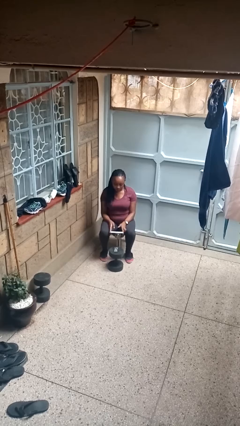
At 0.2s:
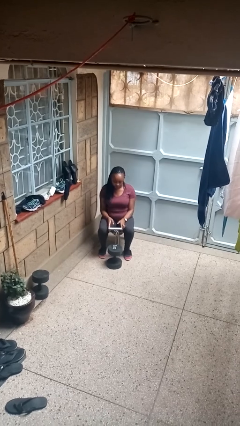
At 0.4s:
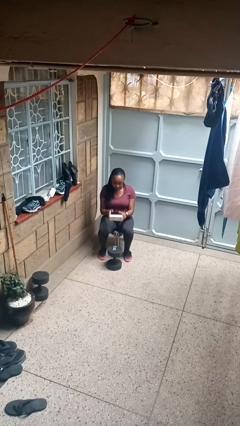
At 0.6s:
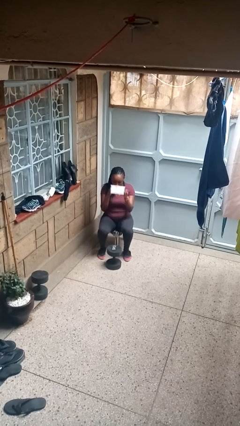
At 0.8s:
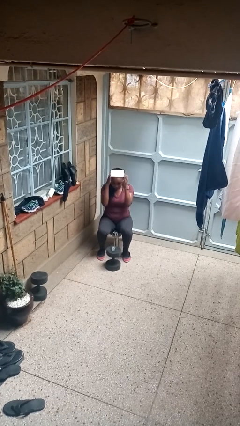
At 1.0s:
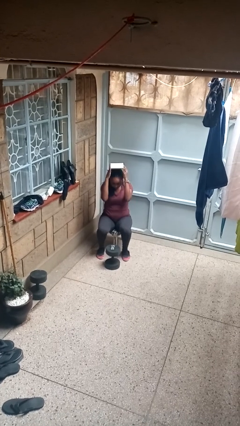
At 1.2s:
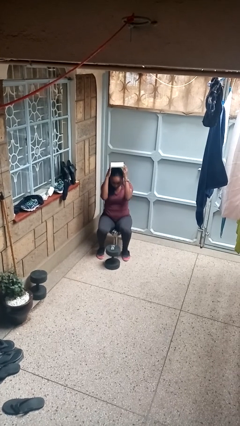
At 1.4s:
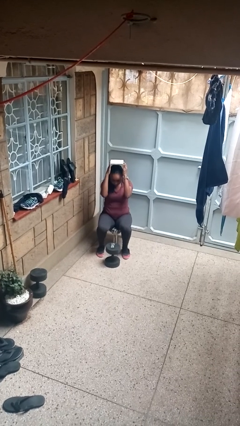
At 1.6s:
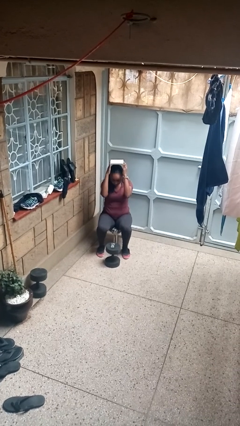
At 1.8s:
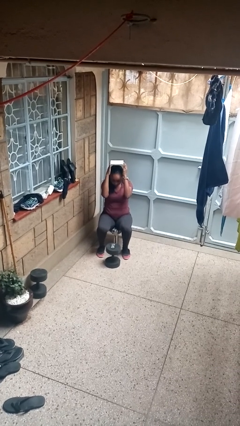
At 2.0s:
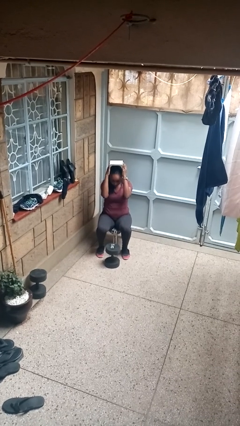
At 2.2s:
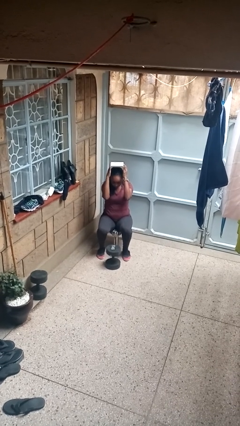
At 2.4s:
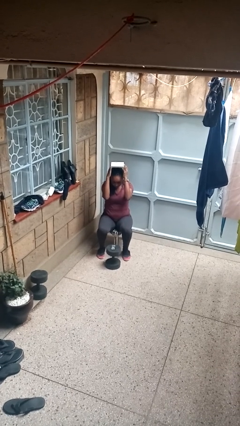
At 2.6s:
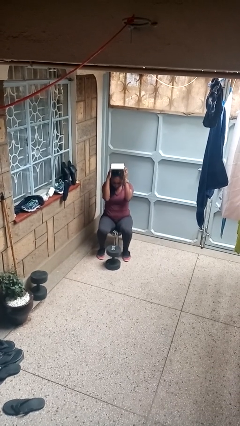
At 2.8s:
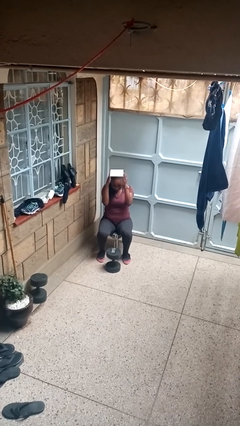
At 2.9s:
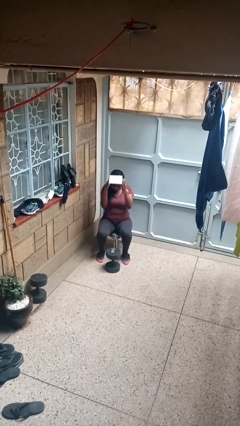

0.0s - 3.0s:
person holds object above head

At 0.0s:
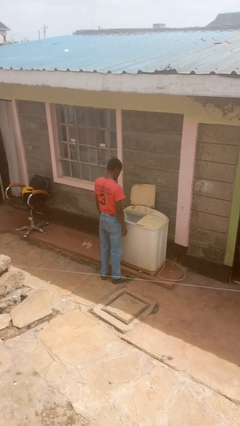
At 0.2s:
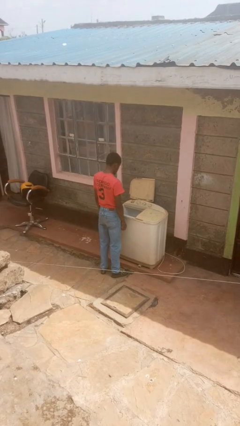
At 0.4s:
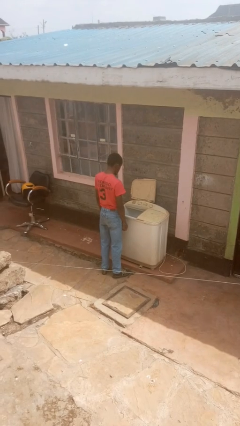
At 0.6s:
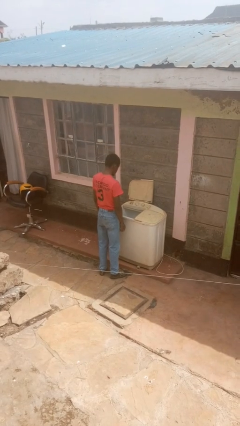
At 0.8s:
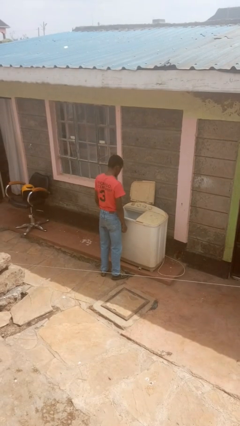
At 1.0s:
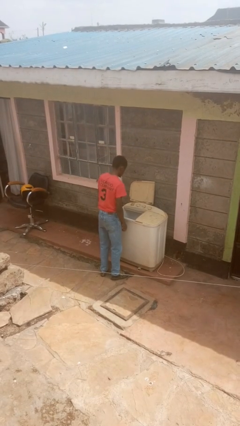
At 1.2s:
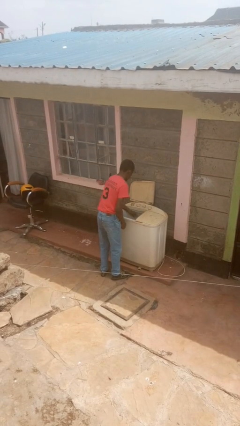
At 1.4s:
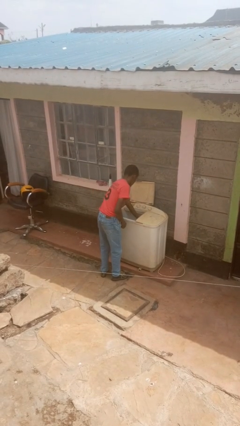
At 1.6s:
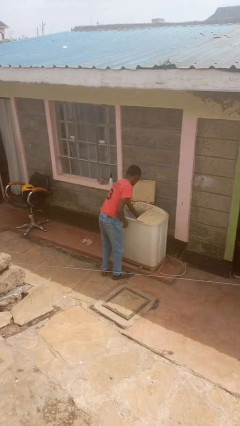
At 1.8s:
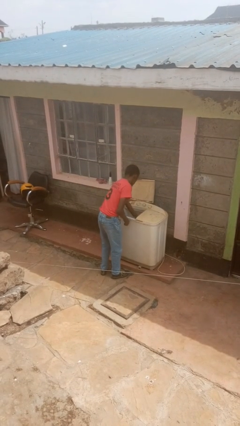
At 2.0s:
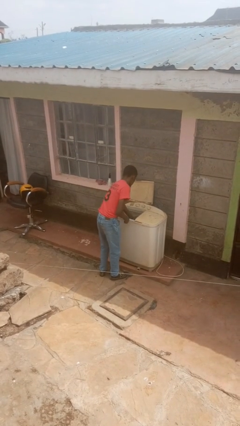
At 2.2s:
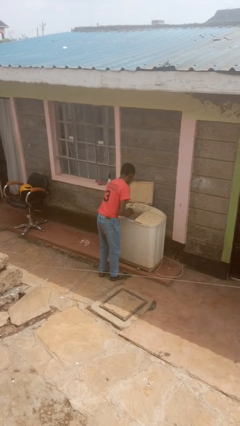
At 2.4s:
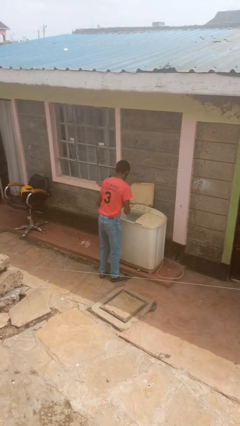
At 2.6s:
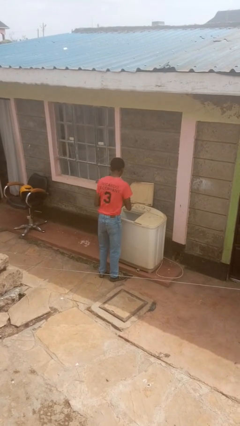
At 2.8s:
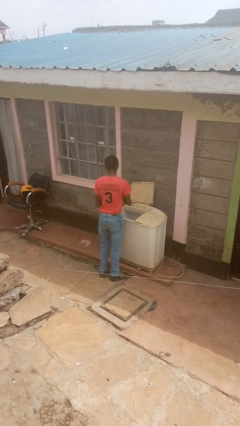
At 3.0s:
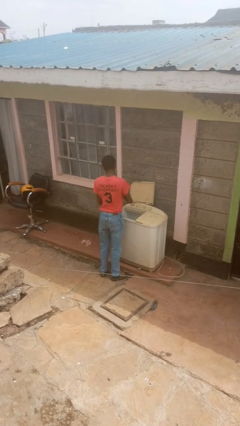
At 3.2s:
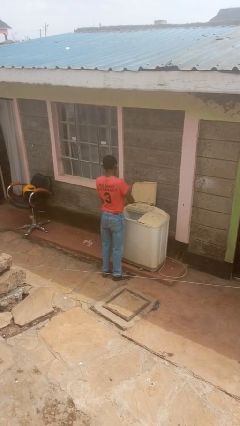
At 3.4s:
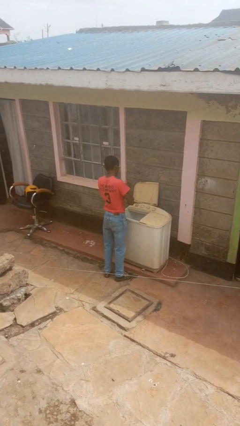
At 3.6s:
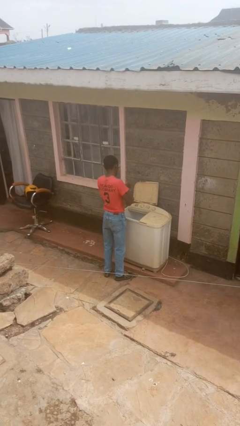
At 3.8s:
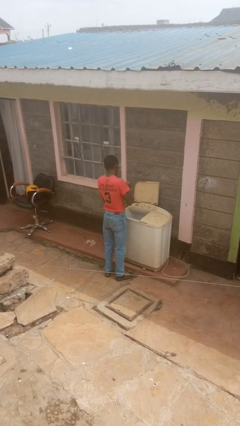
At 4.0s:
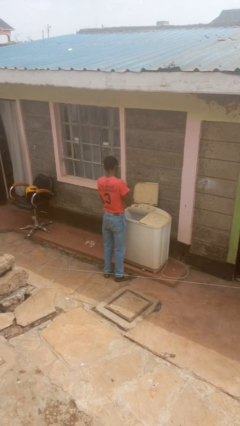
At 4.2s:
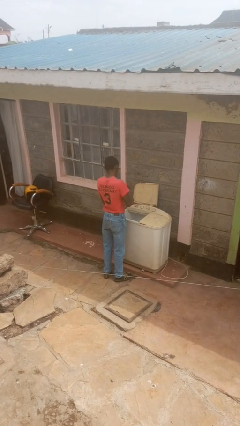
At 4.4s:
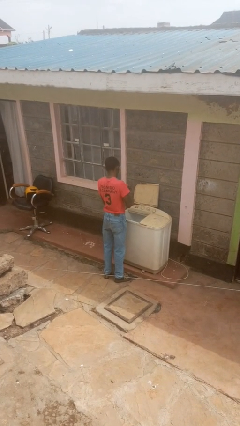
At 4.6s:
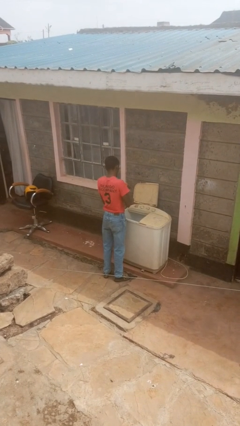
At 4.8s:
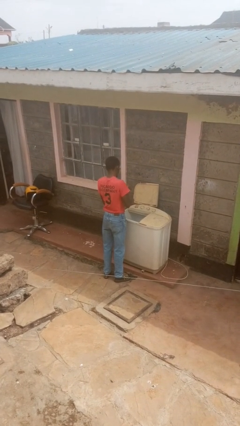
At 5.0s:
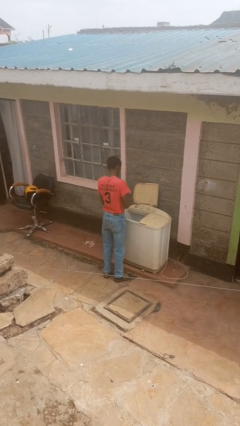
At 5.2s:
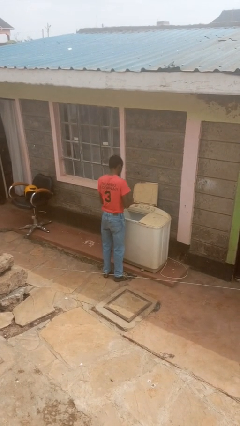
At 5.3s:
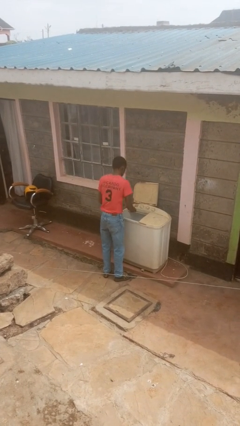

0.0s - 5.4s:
person cleans dryer lint trap

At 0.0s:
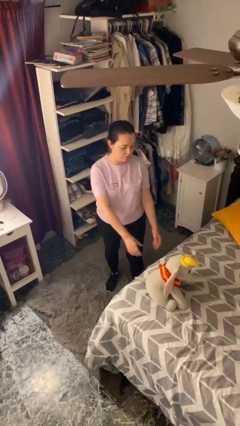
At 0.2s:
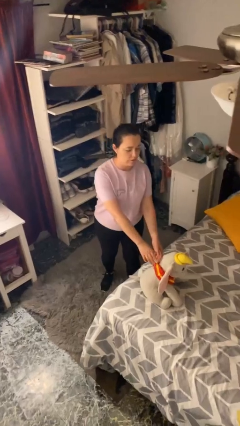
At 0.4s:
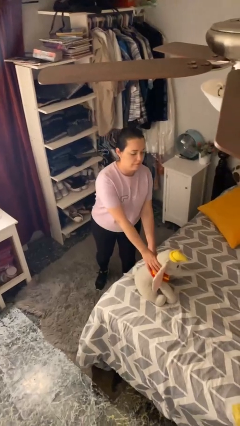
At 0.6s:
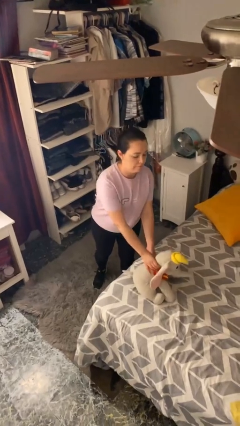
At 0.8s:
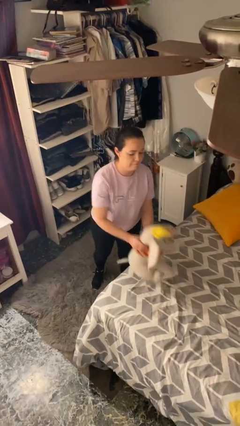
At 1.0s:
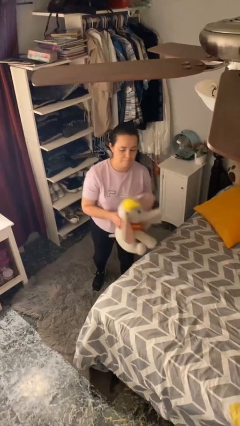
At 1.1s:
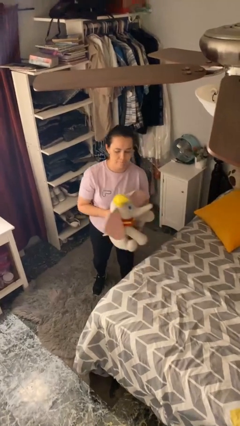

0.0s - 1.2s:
person picks up object from bed

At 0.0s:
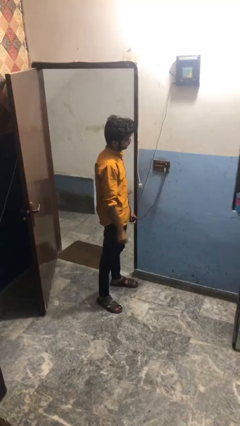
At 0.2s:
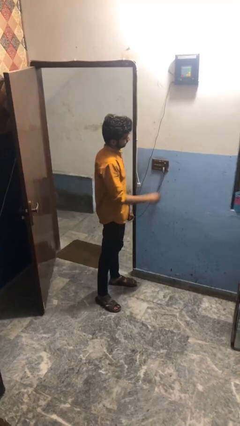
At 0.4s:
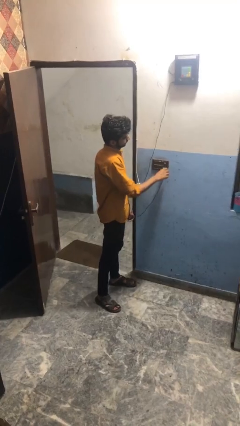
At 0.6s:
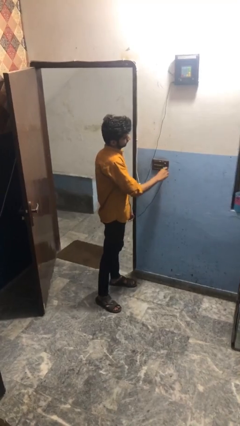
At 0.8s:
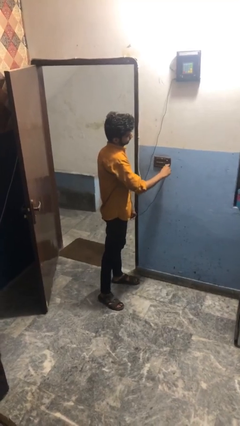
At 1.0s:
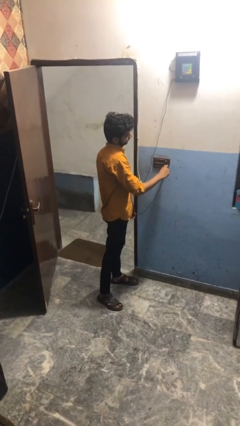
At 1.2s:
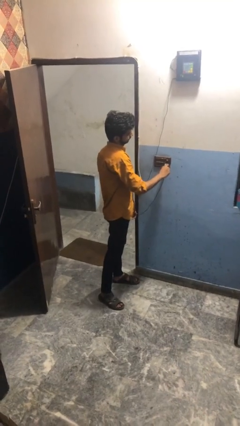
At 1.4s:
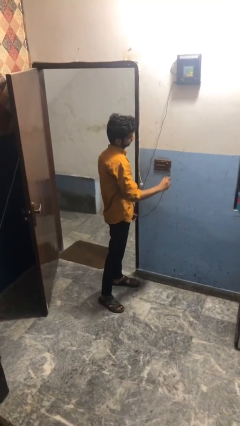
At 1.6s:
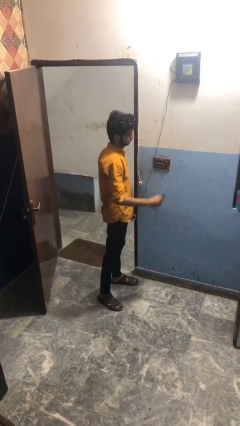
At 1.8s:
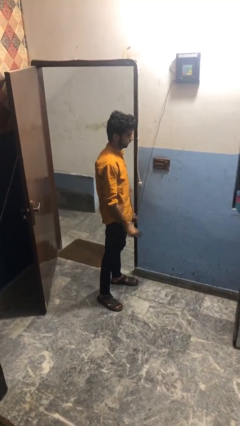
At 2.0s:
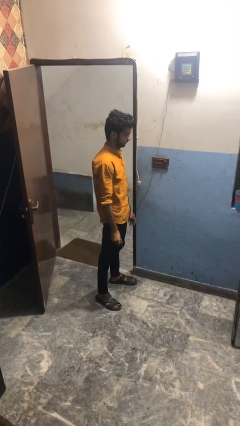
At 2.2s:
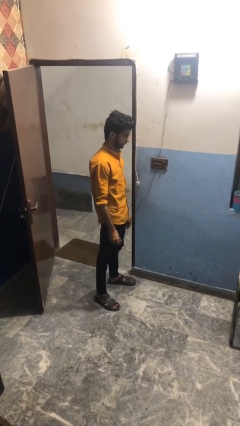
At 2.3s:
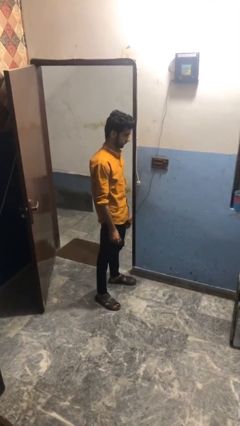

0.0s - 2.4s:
person unplugs from electrical socket

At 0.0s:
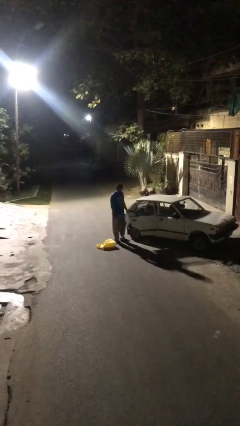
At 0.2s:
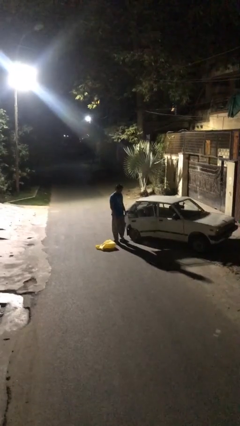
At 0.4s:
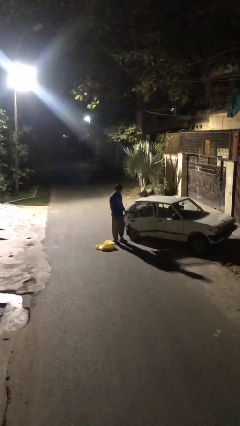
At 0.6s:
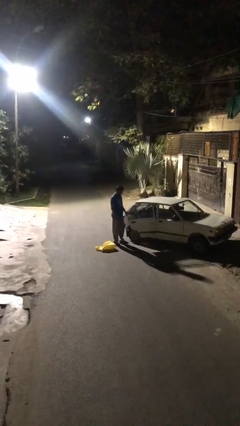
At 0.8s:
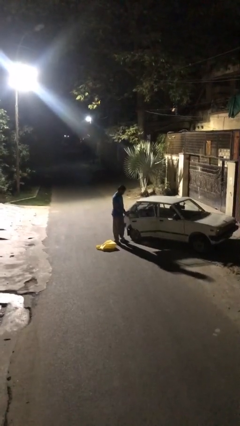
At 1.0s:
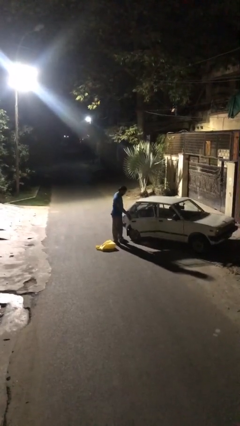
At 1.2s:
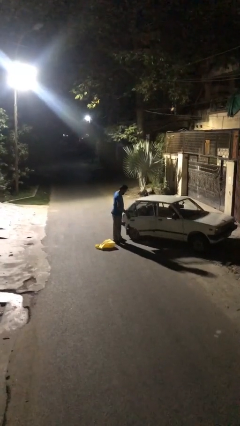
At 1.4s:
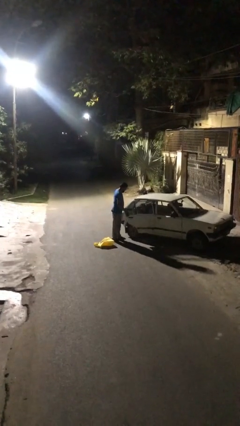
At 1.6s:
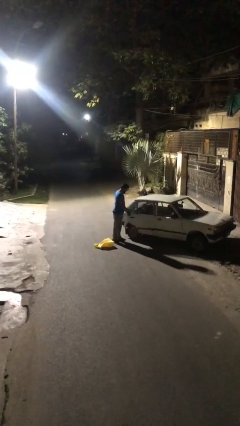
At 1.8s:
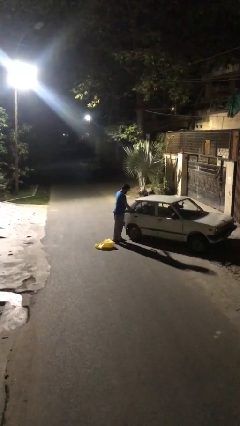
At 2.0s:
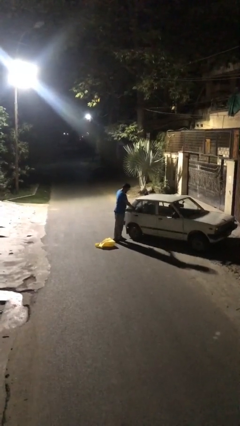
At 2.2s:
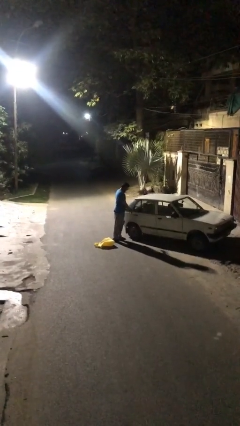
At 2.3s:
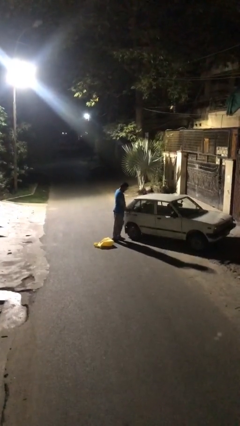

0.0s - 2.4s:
person closes car door

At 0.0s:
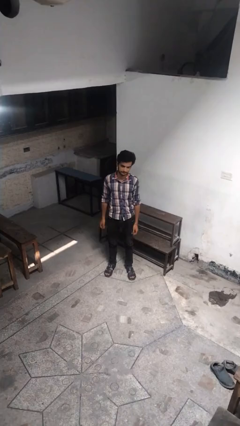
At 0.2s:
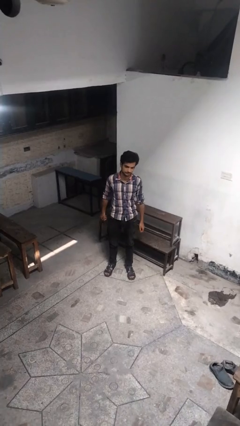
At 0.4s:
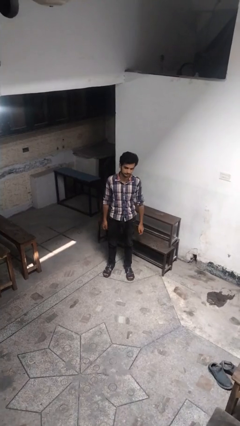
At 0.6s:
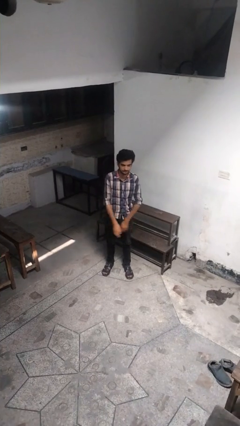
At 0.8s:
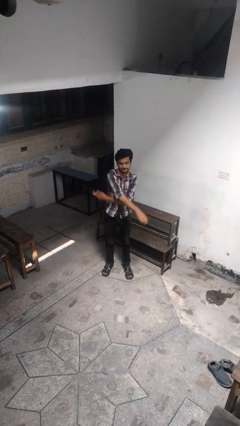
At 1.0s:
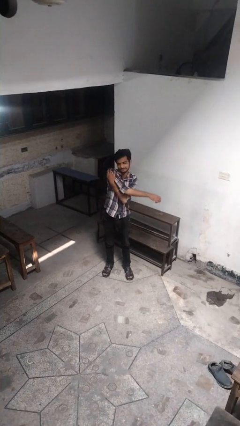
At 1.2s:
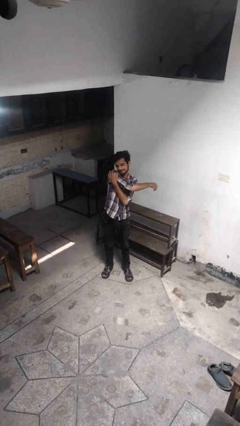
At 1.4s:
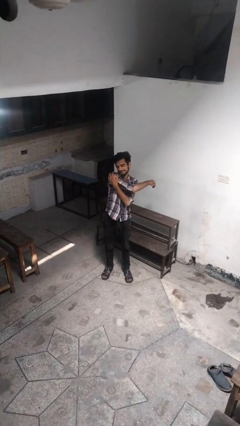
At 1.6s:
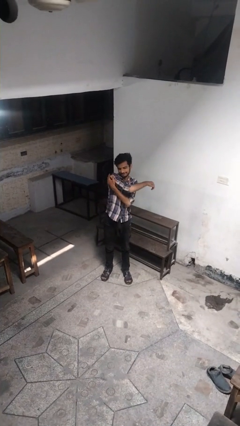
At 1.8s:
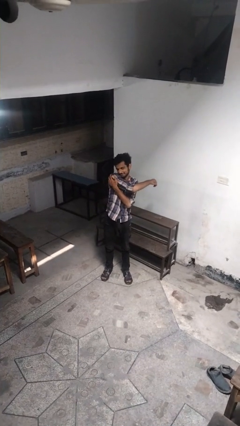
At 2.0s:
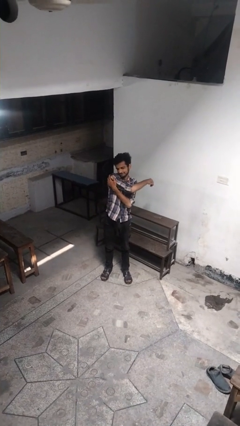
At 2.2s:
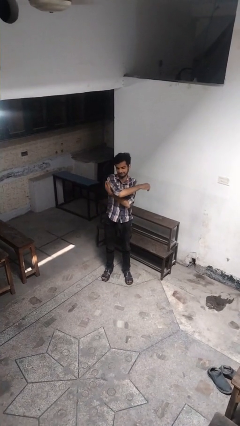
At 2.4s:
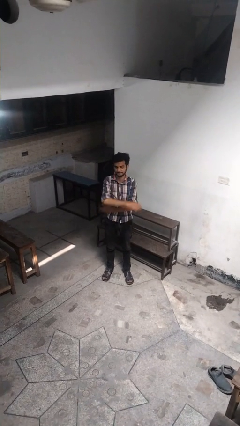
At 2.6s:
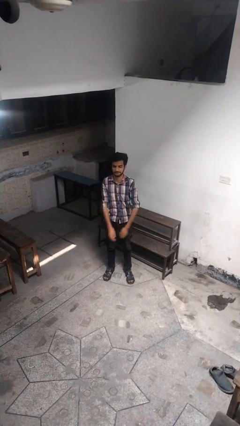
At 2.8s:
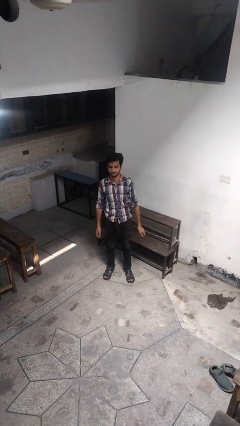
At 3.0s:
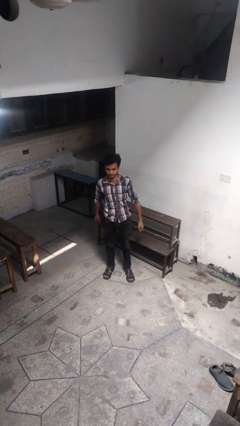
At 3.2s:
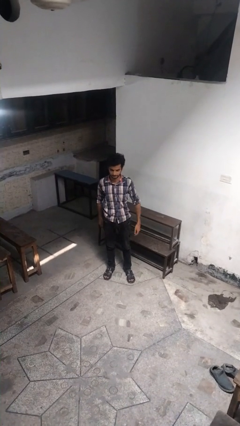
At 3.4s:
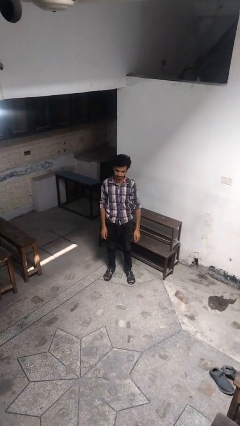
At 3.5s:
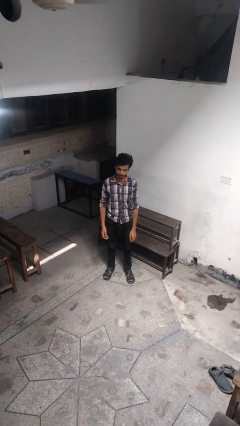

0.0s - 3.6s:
person stretches arms to side
